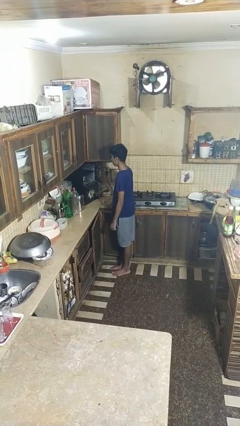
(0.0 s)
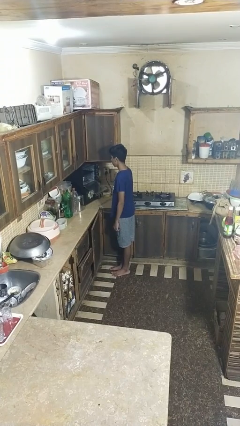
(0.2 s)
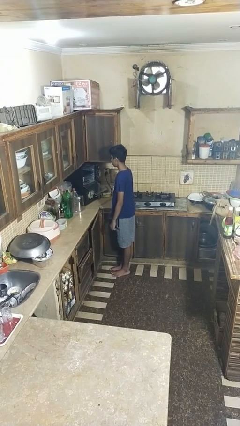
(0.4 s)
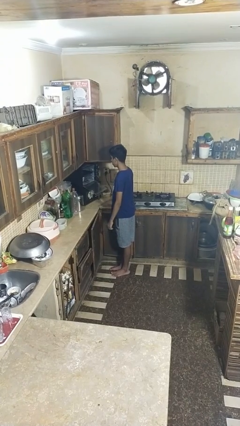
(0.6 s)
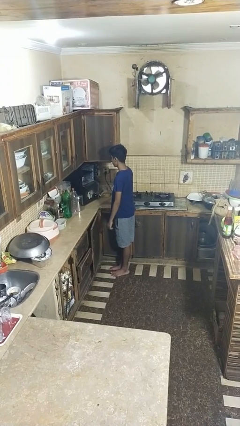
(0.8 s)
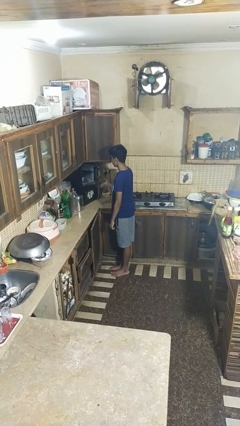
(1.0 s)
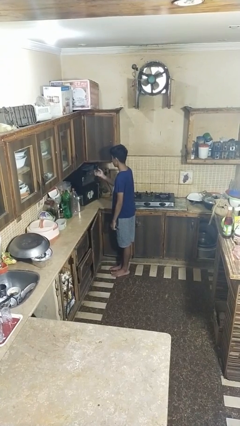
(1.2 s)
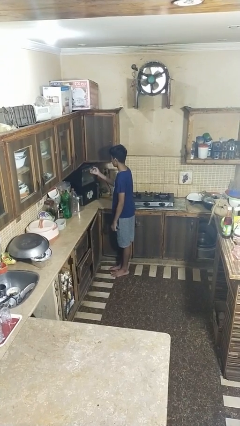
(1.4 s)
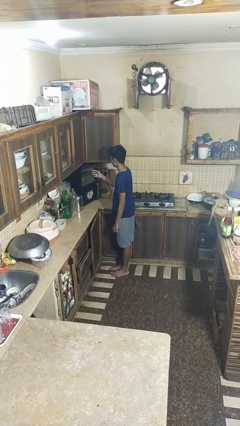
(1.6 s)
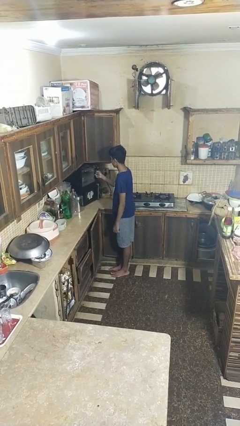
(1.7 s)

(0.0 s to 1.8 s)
person closes oven door

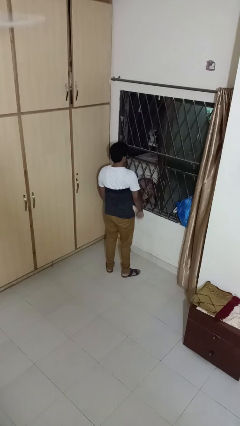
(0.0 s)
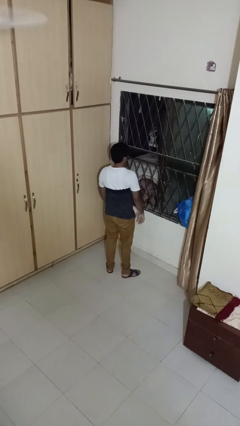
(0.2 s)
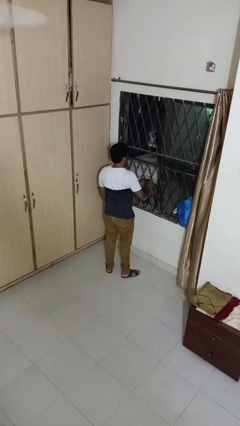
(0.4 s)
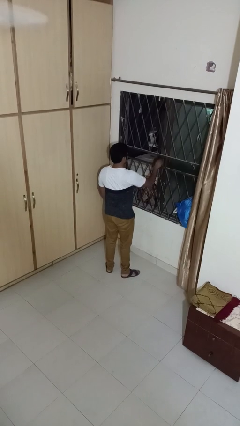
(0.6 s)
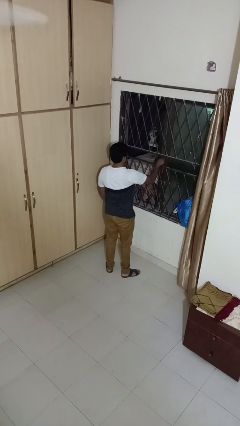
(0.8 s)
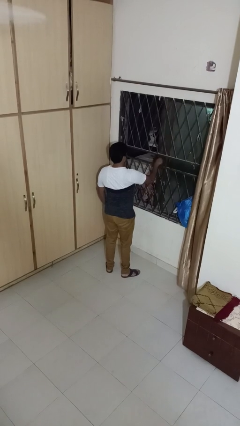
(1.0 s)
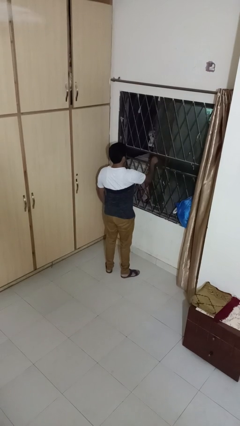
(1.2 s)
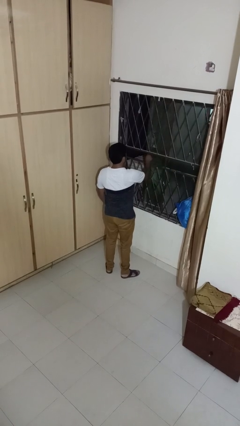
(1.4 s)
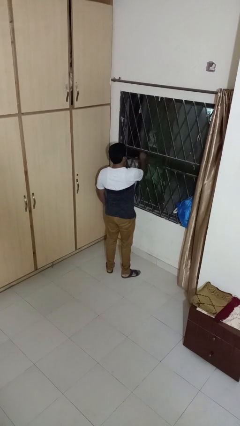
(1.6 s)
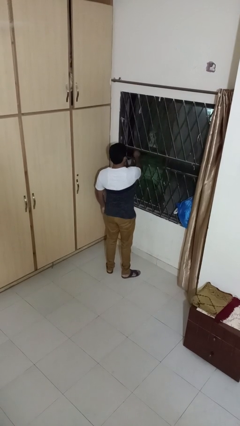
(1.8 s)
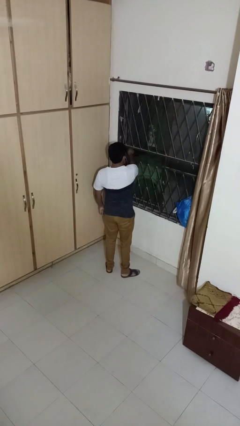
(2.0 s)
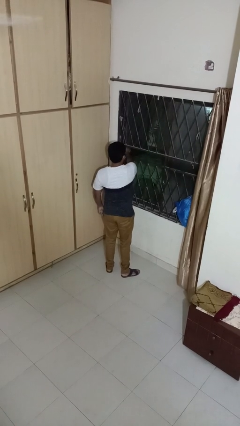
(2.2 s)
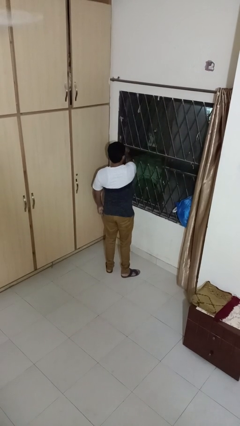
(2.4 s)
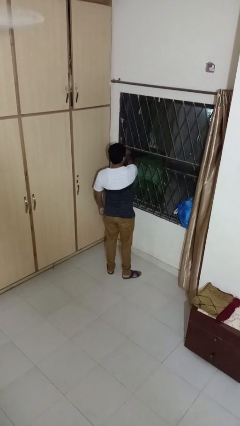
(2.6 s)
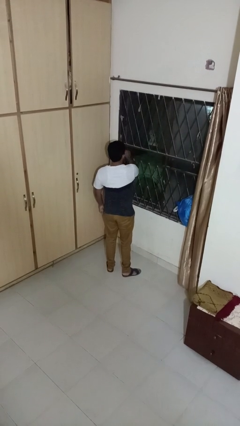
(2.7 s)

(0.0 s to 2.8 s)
person closes home window

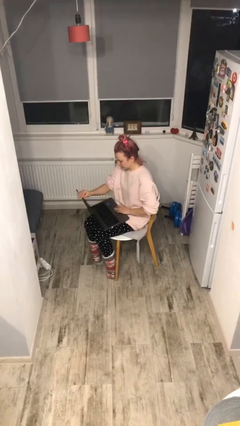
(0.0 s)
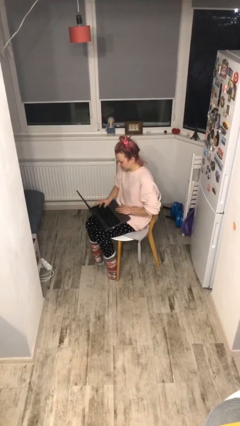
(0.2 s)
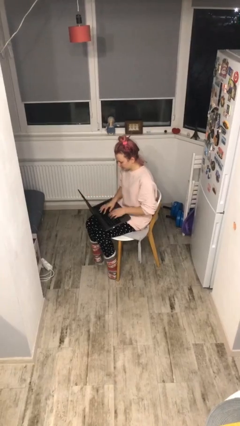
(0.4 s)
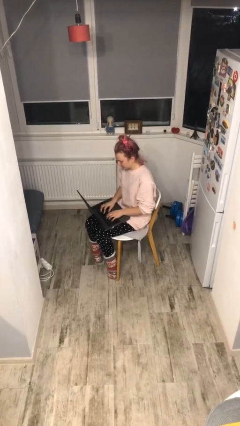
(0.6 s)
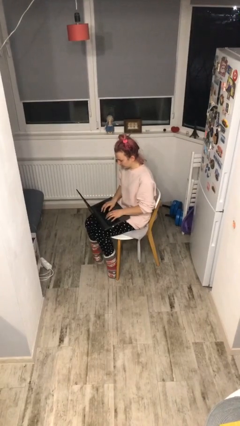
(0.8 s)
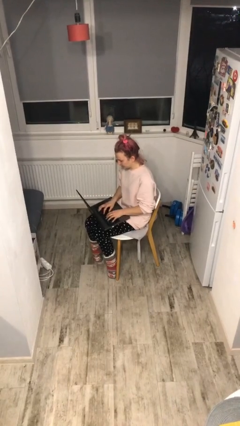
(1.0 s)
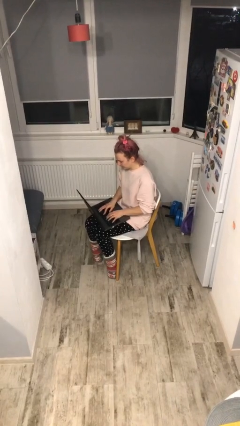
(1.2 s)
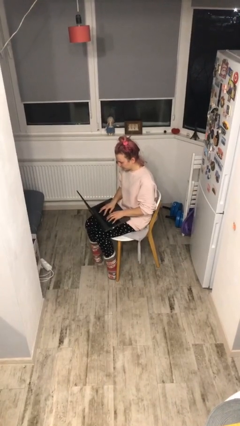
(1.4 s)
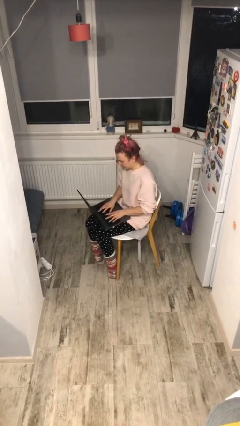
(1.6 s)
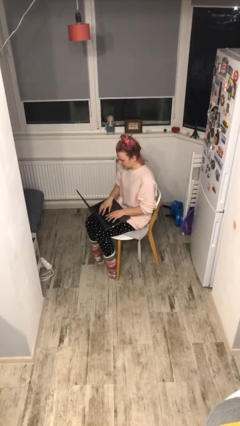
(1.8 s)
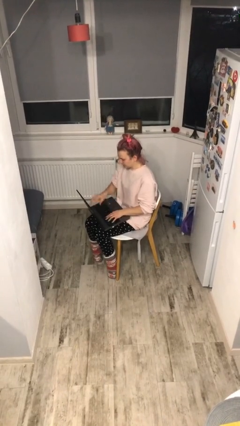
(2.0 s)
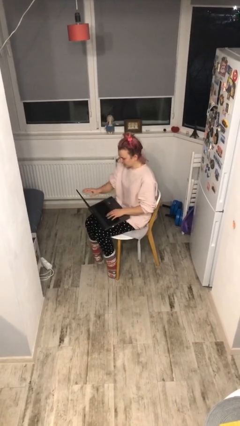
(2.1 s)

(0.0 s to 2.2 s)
person interacts with laptop

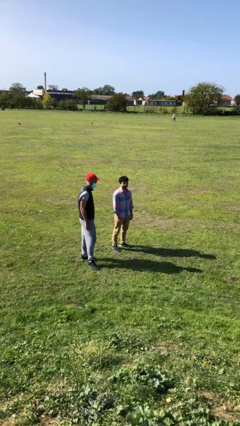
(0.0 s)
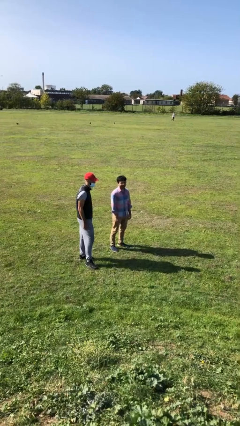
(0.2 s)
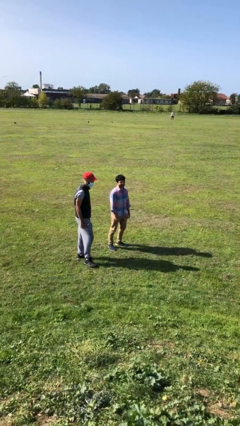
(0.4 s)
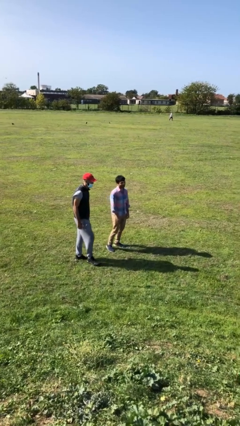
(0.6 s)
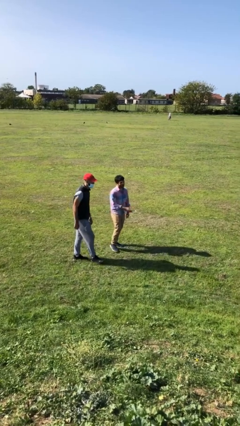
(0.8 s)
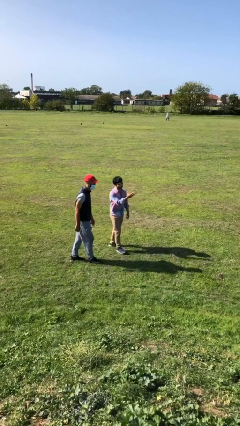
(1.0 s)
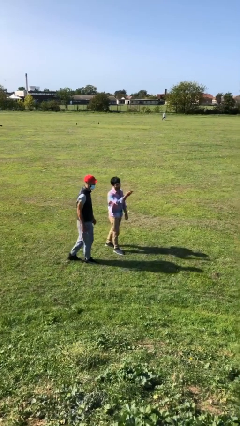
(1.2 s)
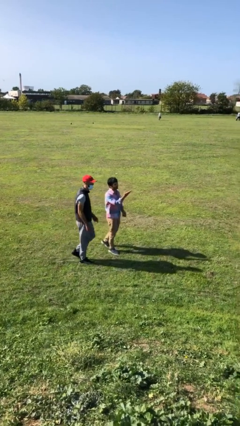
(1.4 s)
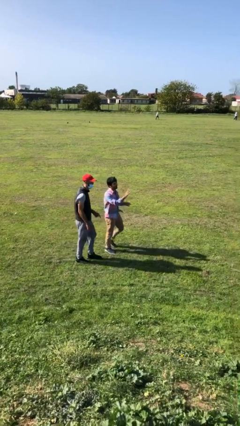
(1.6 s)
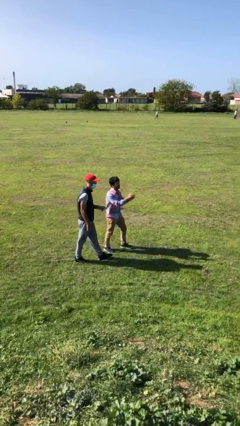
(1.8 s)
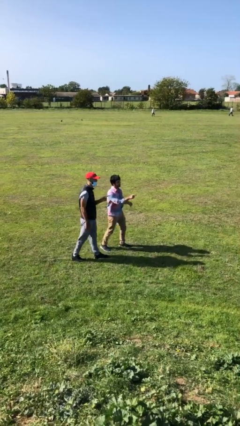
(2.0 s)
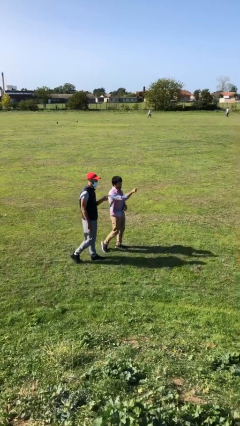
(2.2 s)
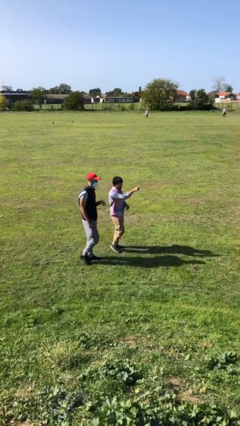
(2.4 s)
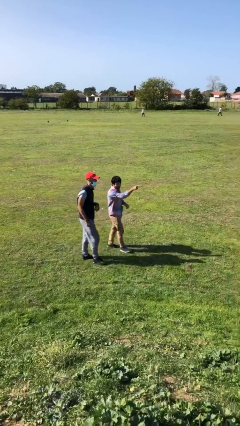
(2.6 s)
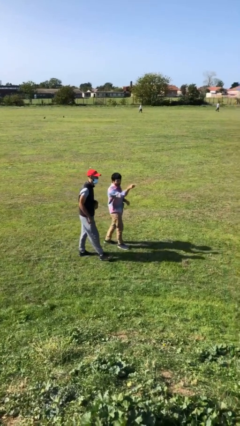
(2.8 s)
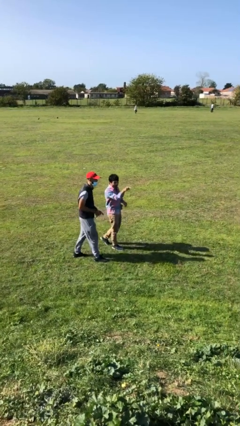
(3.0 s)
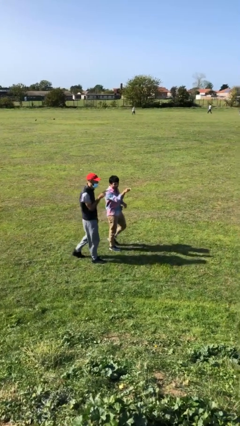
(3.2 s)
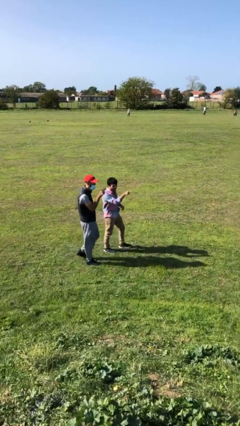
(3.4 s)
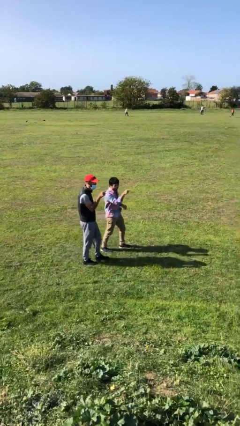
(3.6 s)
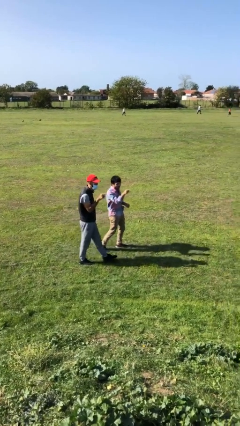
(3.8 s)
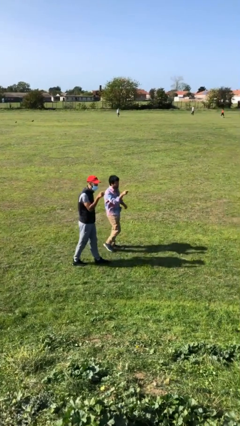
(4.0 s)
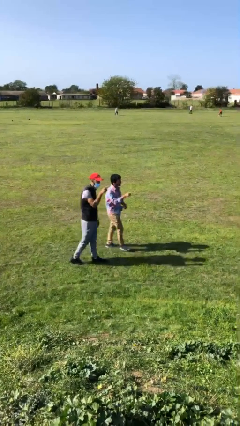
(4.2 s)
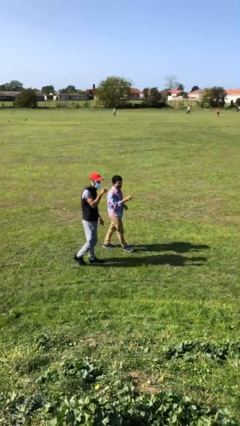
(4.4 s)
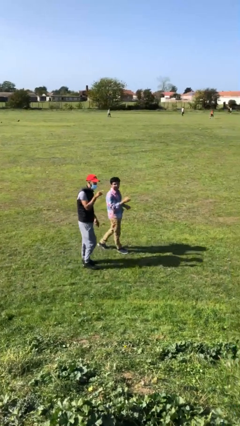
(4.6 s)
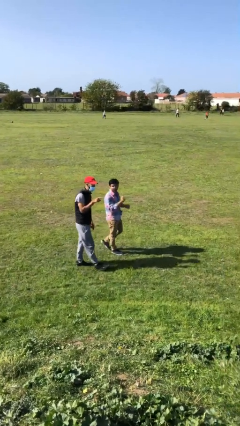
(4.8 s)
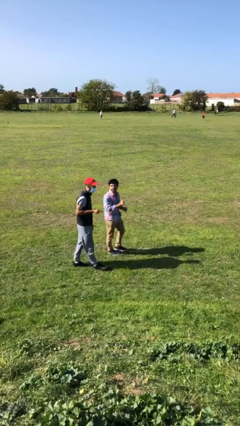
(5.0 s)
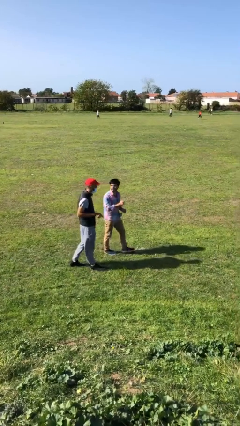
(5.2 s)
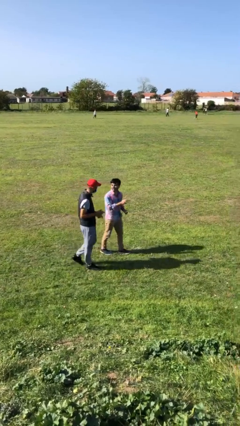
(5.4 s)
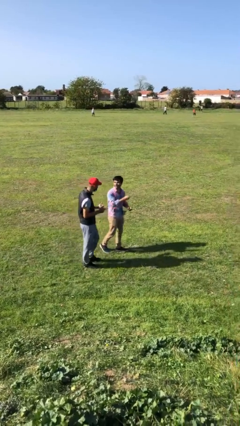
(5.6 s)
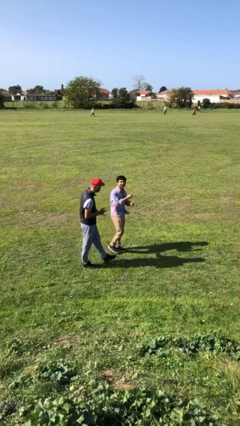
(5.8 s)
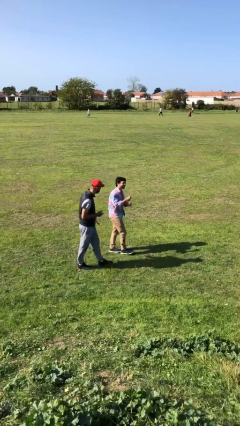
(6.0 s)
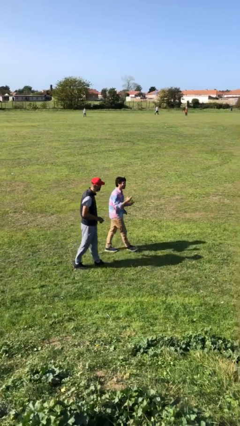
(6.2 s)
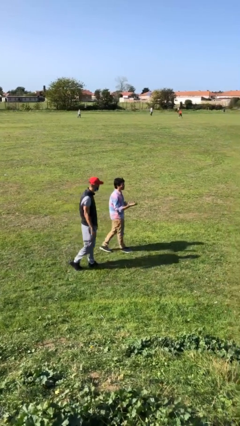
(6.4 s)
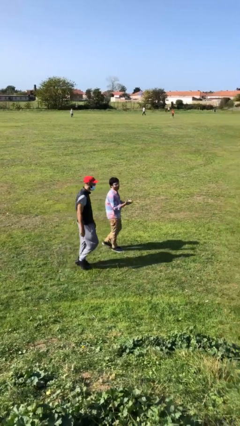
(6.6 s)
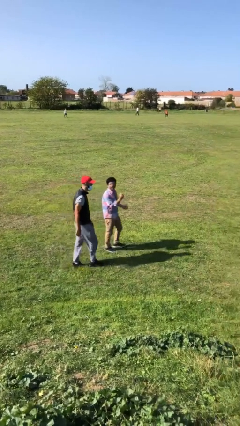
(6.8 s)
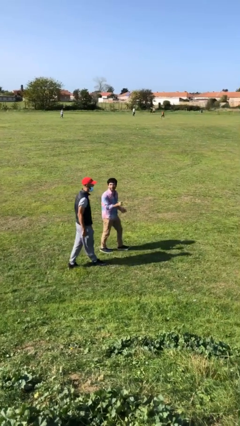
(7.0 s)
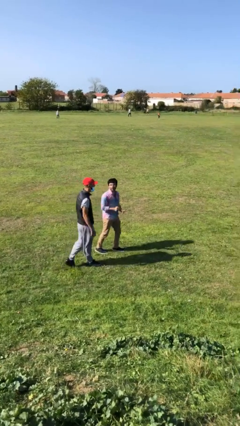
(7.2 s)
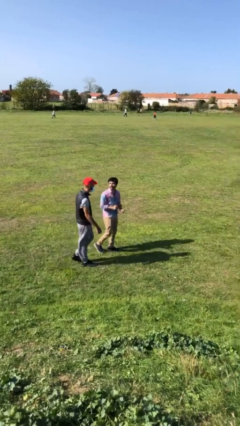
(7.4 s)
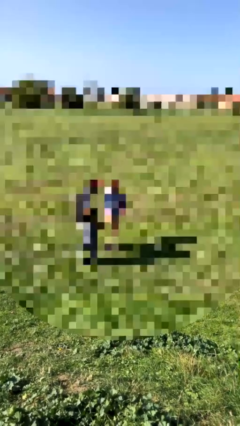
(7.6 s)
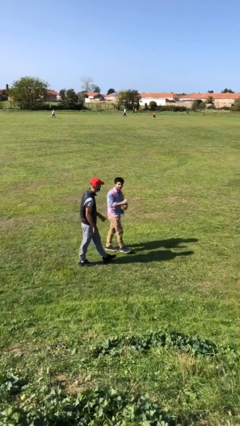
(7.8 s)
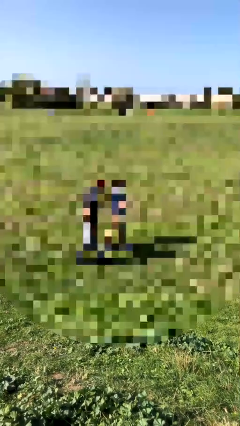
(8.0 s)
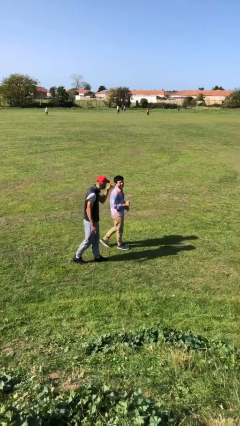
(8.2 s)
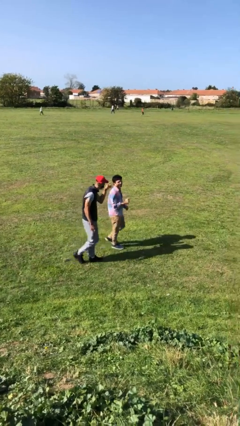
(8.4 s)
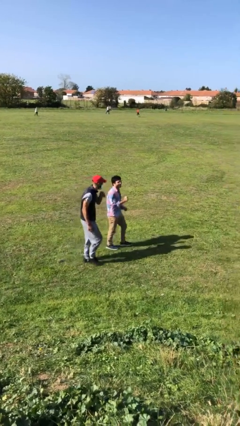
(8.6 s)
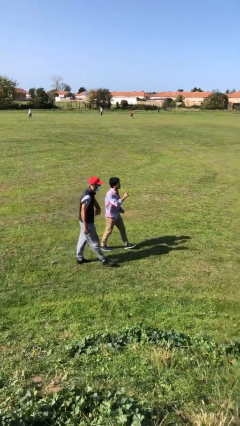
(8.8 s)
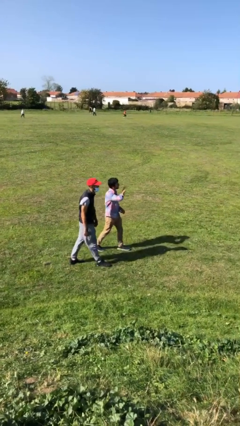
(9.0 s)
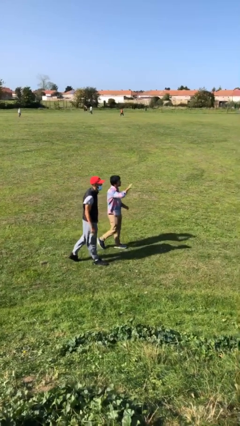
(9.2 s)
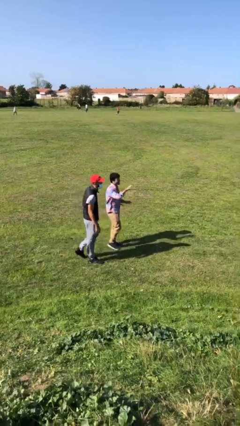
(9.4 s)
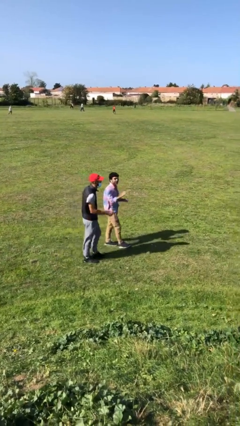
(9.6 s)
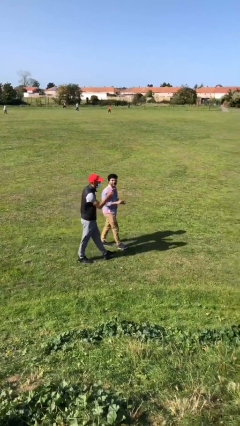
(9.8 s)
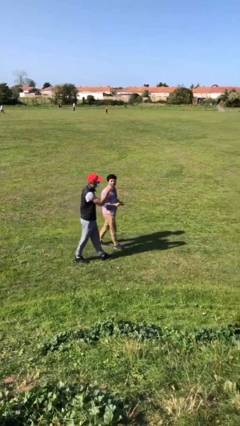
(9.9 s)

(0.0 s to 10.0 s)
person talks to person

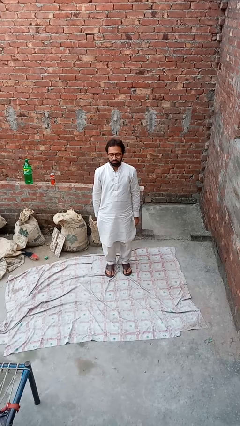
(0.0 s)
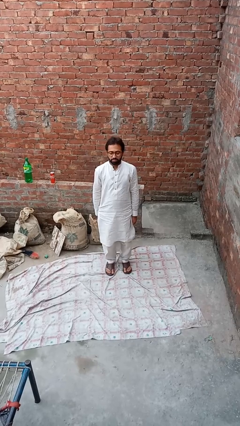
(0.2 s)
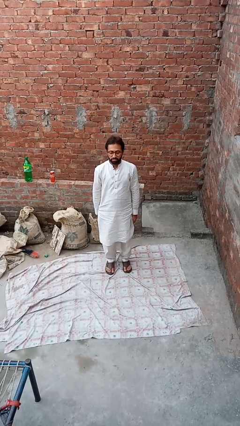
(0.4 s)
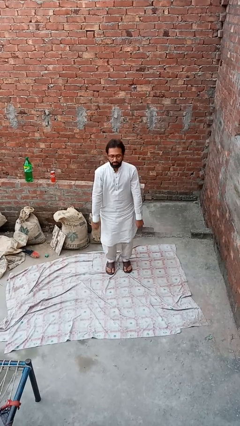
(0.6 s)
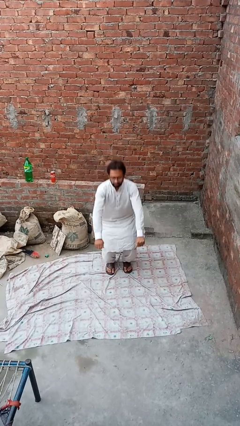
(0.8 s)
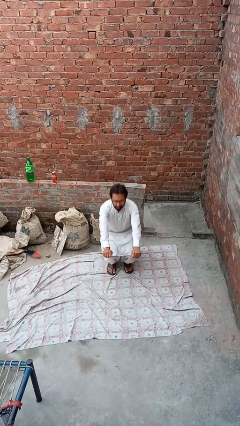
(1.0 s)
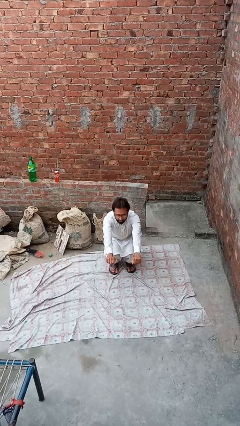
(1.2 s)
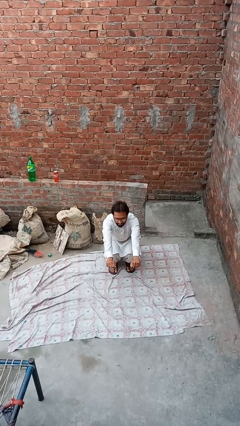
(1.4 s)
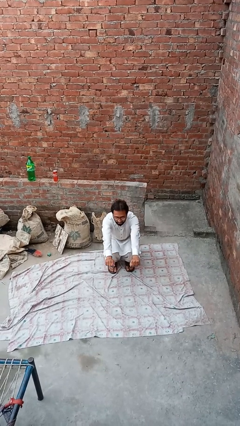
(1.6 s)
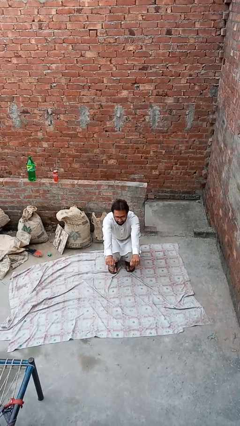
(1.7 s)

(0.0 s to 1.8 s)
person squats
